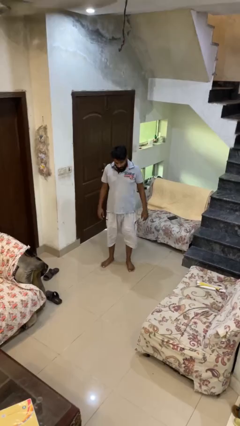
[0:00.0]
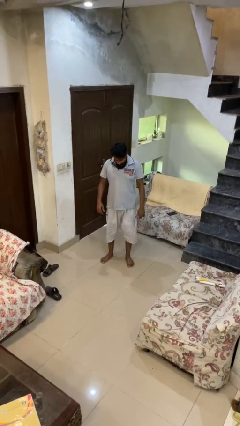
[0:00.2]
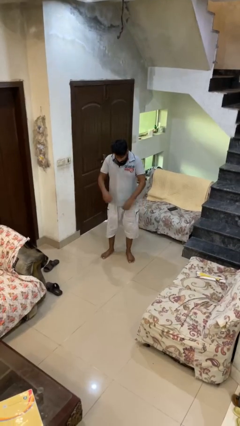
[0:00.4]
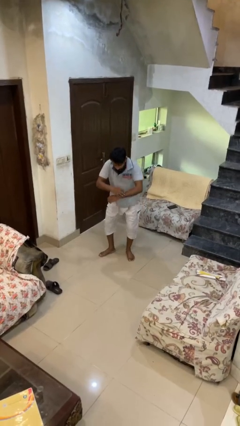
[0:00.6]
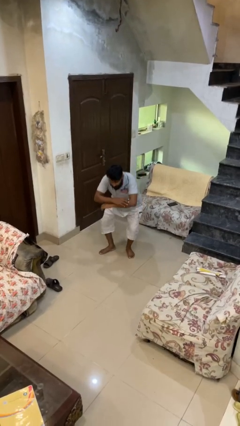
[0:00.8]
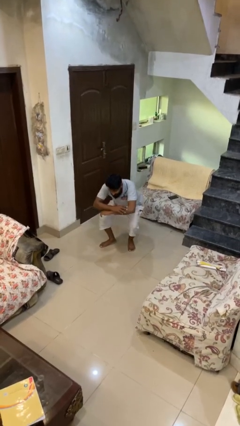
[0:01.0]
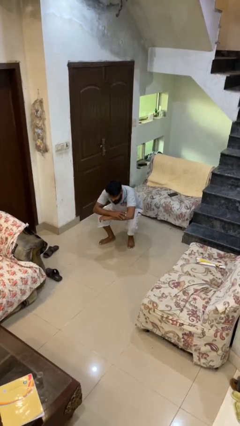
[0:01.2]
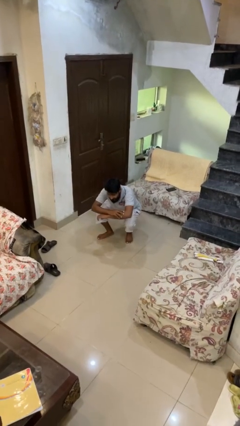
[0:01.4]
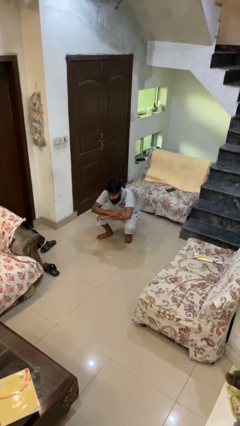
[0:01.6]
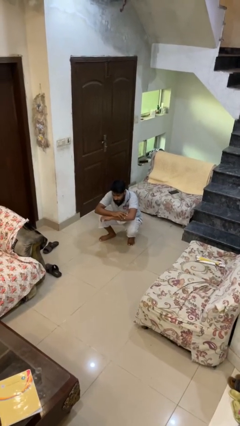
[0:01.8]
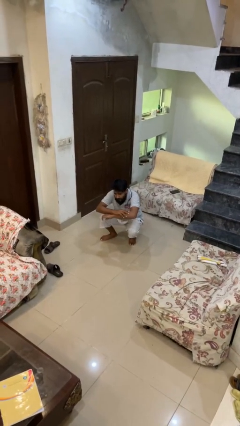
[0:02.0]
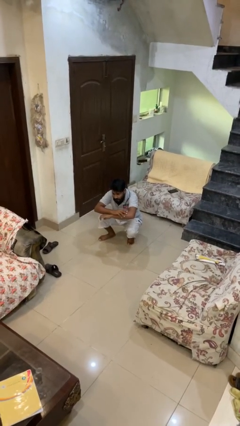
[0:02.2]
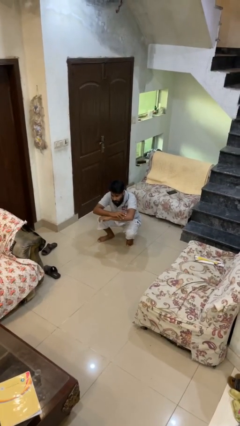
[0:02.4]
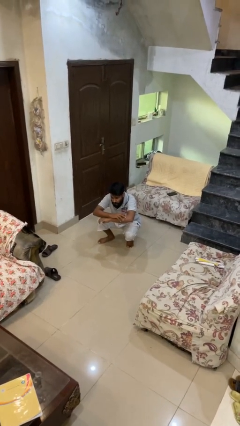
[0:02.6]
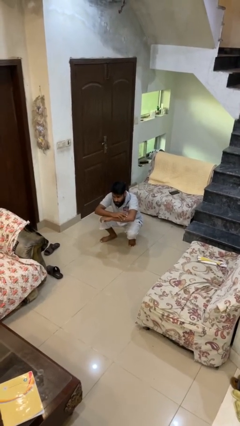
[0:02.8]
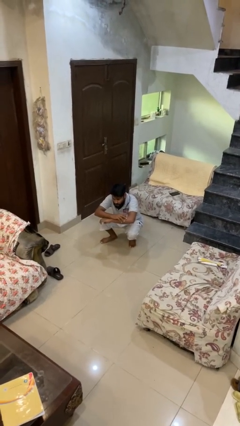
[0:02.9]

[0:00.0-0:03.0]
person squats

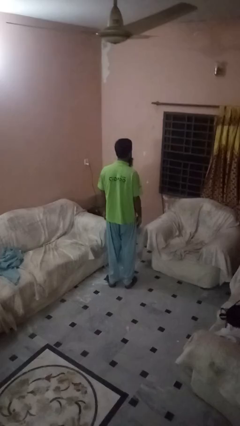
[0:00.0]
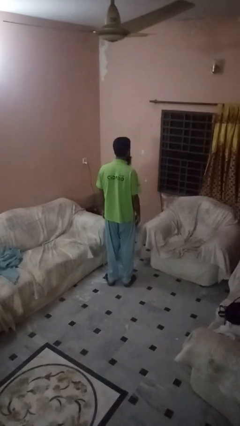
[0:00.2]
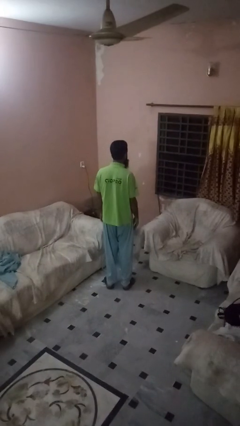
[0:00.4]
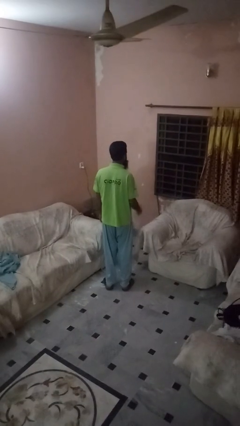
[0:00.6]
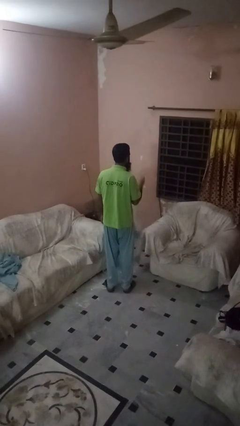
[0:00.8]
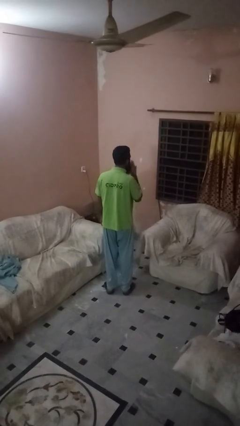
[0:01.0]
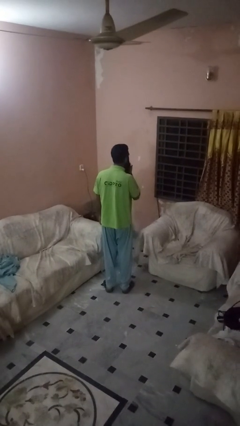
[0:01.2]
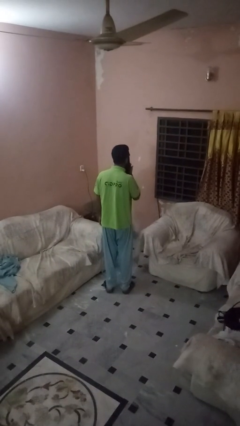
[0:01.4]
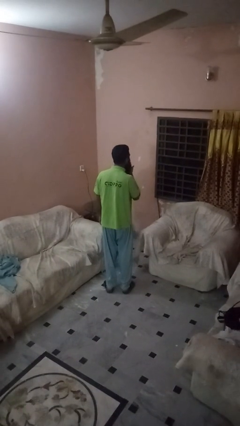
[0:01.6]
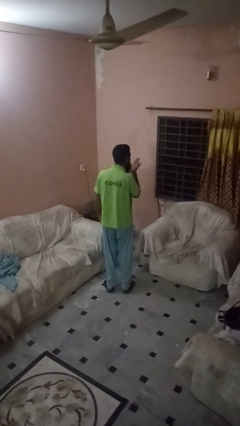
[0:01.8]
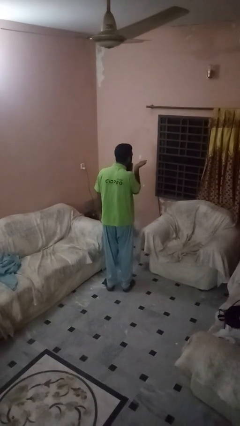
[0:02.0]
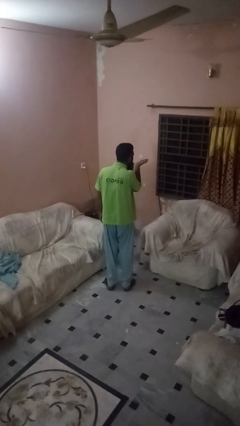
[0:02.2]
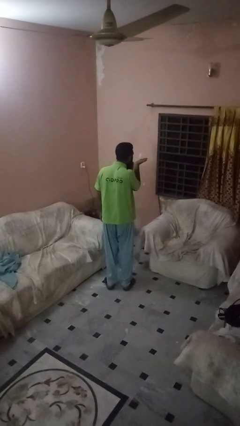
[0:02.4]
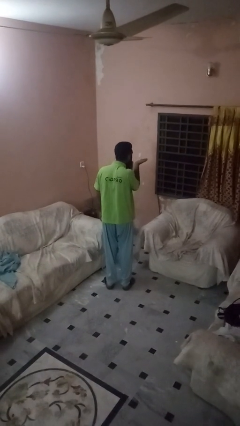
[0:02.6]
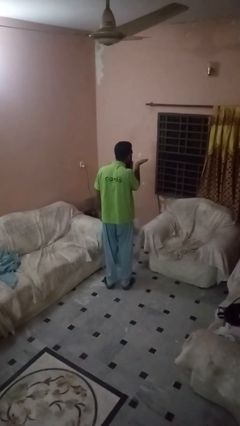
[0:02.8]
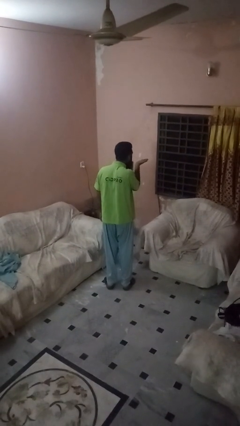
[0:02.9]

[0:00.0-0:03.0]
person gestures blow kiss

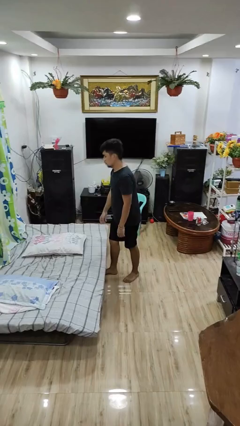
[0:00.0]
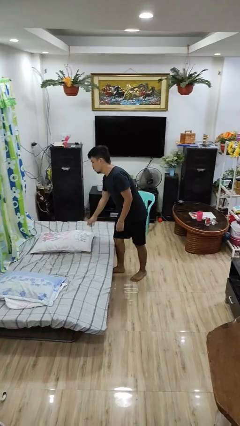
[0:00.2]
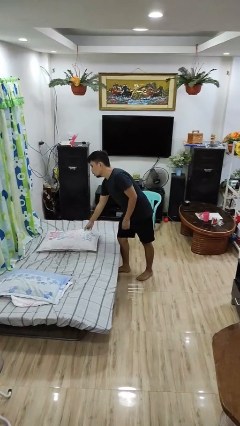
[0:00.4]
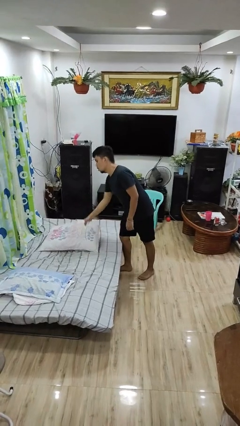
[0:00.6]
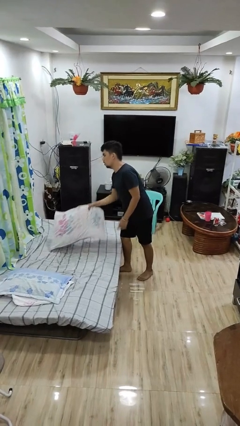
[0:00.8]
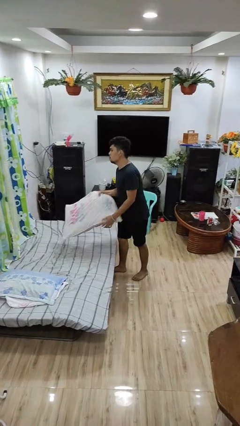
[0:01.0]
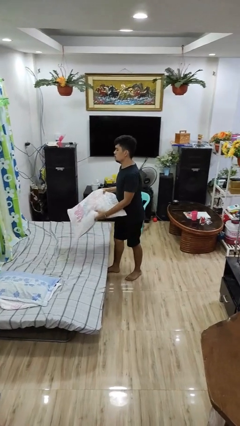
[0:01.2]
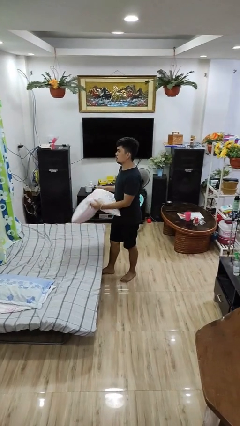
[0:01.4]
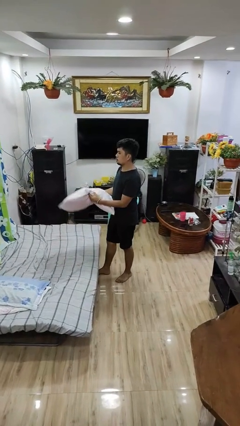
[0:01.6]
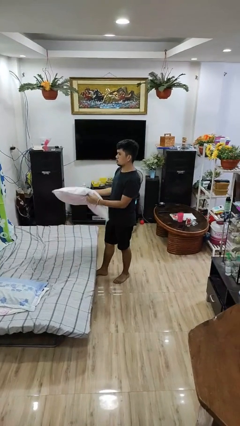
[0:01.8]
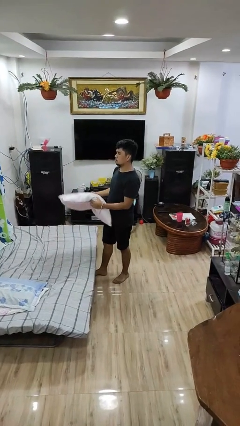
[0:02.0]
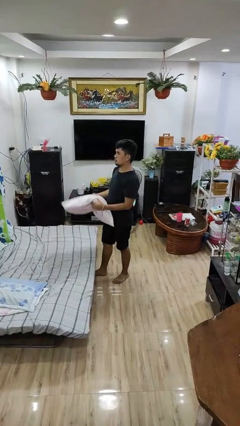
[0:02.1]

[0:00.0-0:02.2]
person picks up object from bed

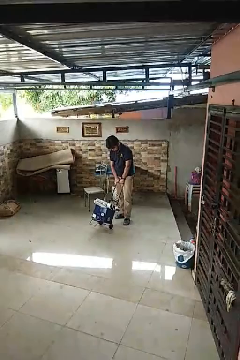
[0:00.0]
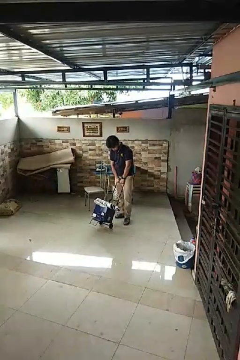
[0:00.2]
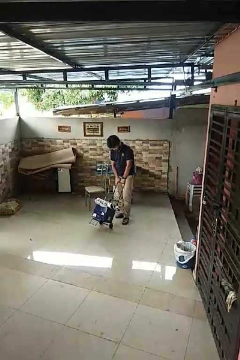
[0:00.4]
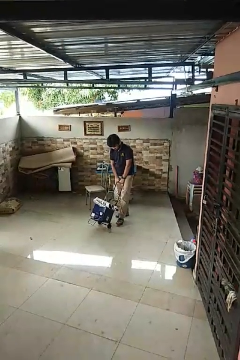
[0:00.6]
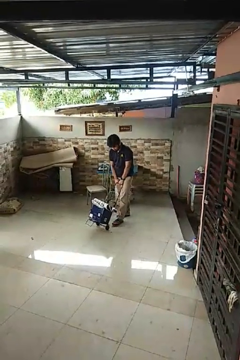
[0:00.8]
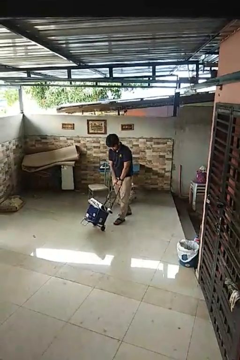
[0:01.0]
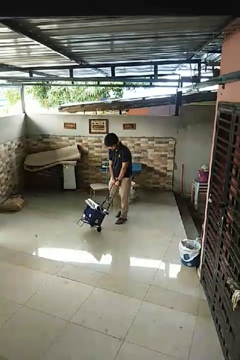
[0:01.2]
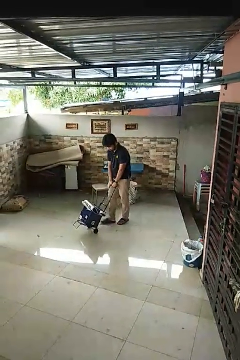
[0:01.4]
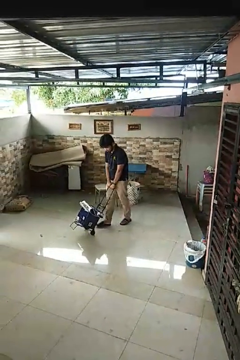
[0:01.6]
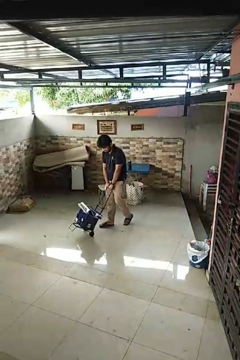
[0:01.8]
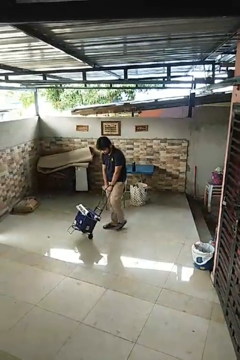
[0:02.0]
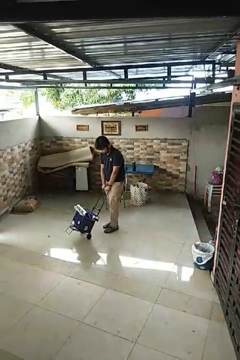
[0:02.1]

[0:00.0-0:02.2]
person pushes wheeled cart

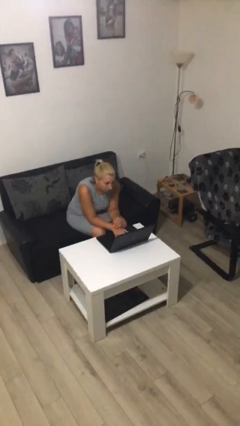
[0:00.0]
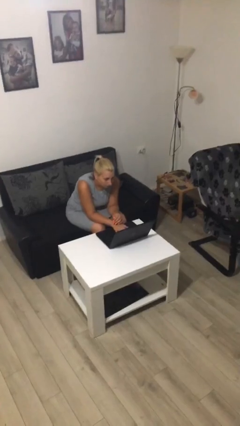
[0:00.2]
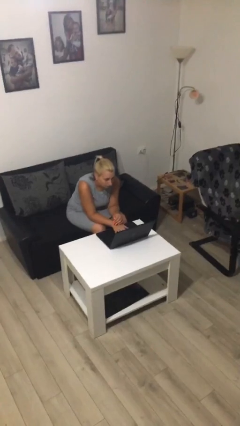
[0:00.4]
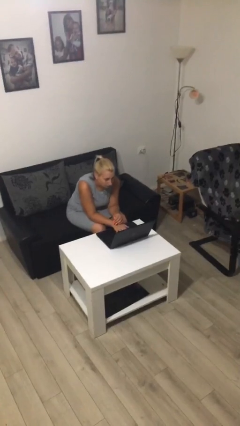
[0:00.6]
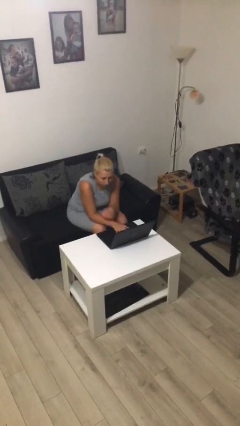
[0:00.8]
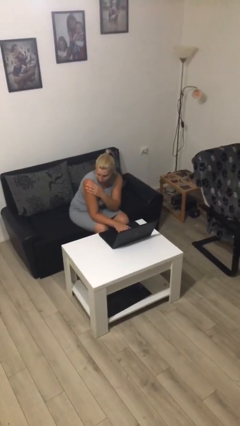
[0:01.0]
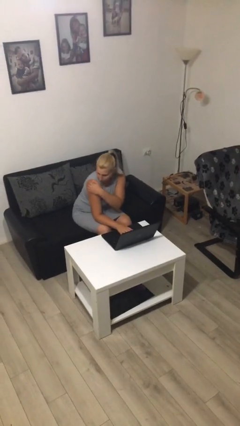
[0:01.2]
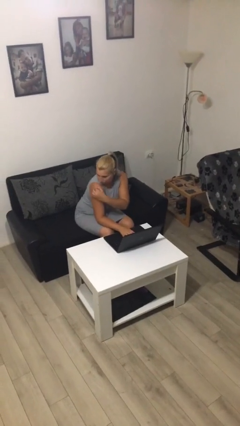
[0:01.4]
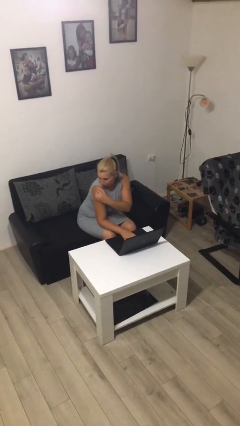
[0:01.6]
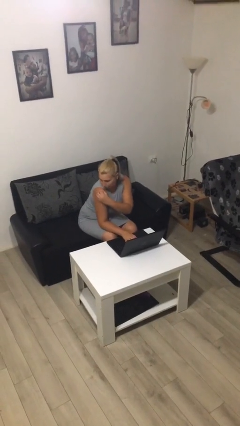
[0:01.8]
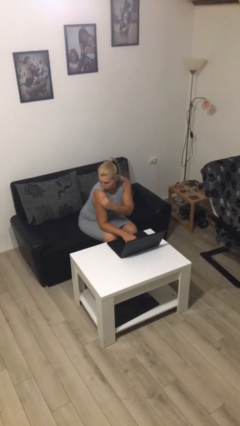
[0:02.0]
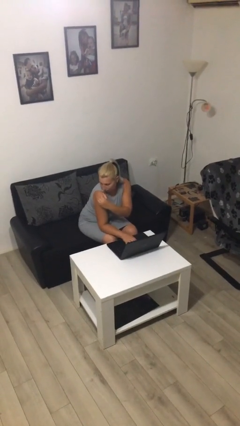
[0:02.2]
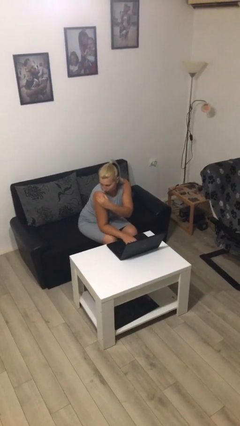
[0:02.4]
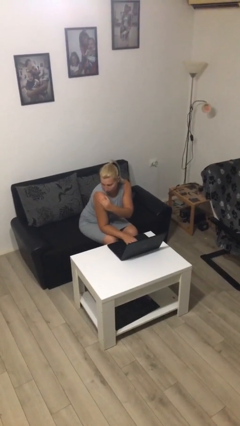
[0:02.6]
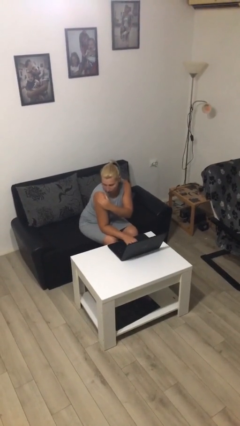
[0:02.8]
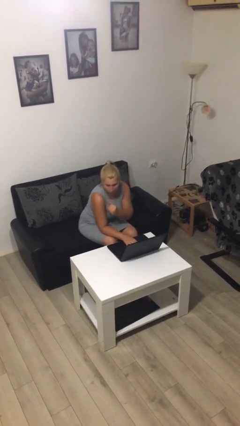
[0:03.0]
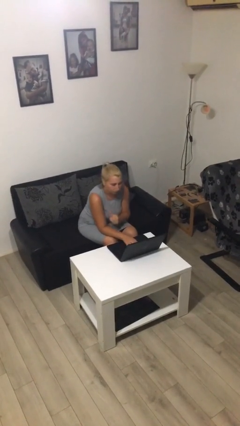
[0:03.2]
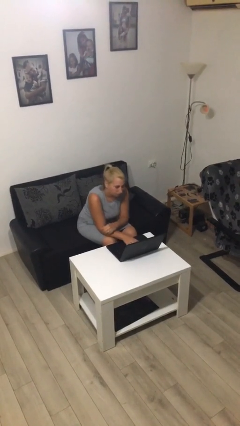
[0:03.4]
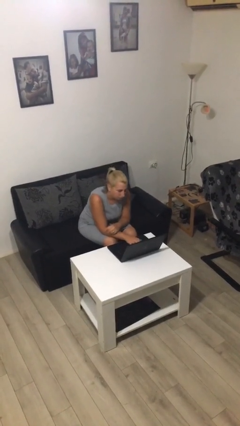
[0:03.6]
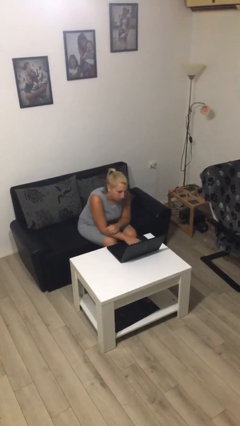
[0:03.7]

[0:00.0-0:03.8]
person interacts with laptop

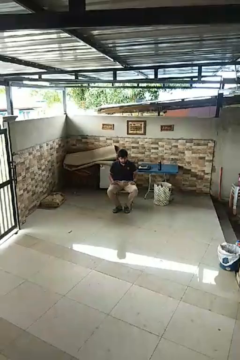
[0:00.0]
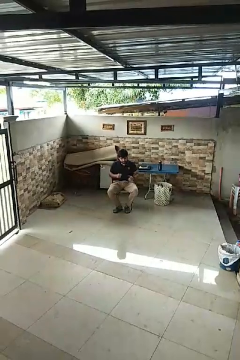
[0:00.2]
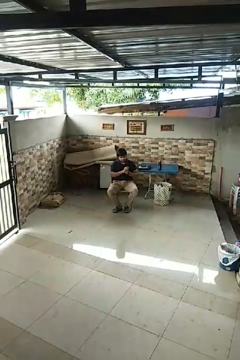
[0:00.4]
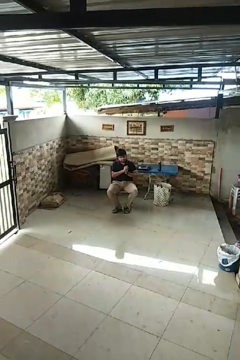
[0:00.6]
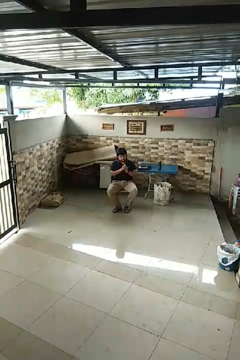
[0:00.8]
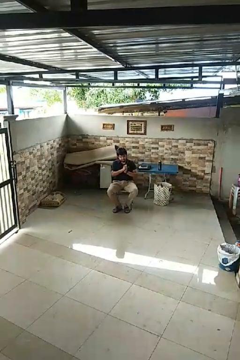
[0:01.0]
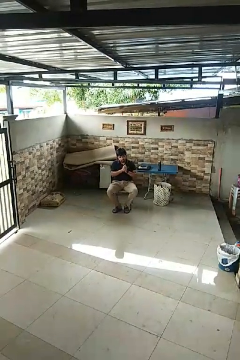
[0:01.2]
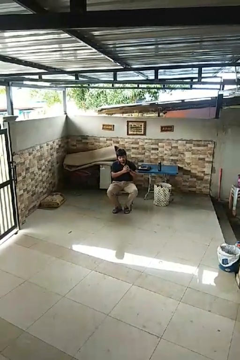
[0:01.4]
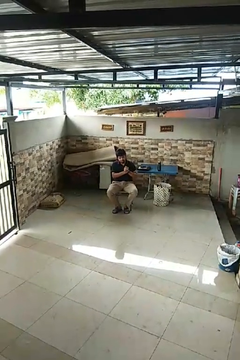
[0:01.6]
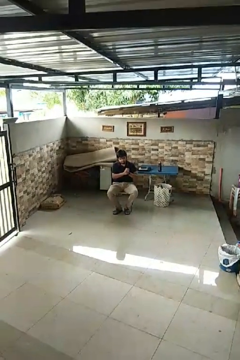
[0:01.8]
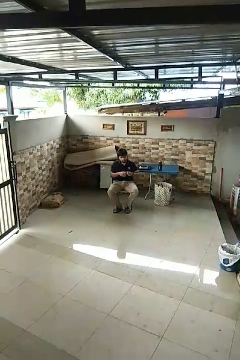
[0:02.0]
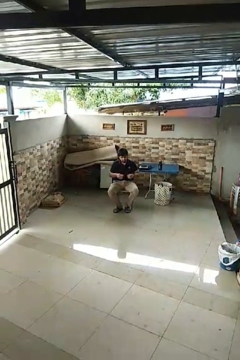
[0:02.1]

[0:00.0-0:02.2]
person cracks knuckles

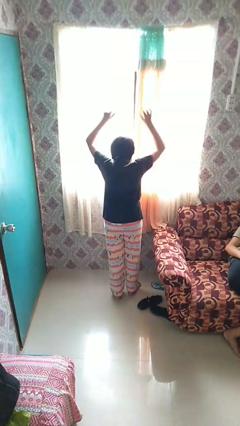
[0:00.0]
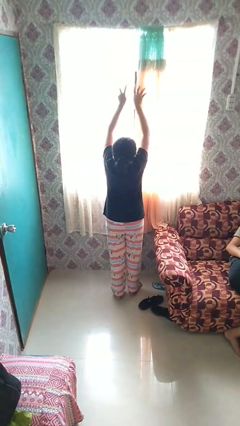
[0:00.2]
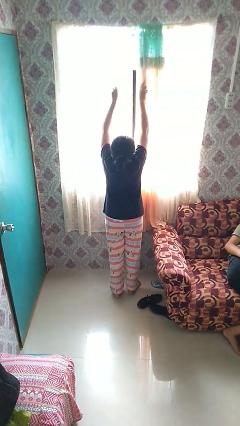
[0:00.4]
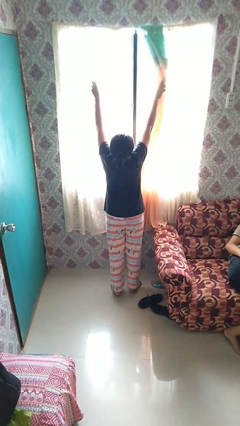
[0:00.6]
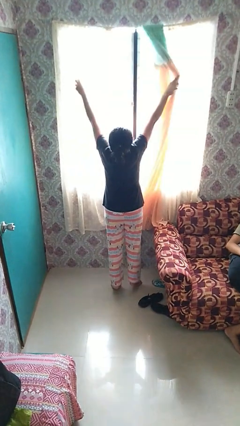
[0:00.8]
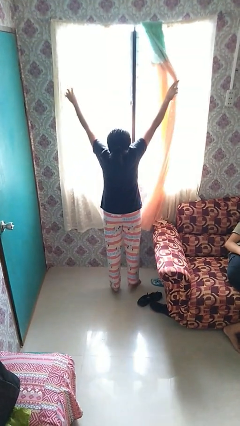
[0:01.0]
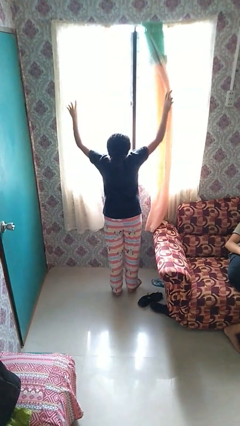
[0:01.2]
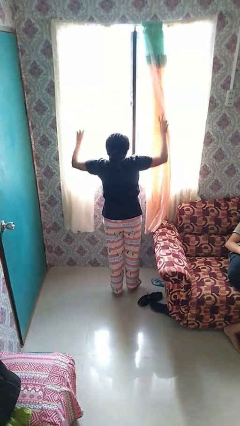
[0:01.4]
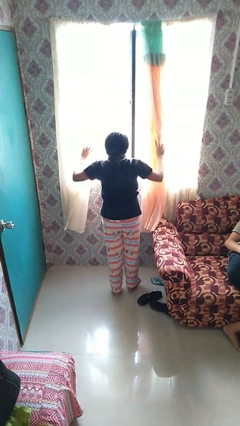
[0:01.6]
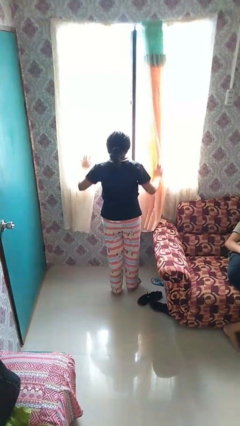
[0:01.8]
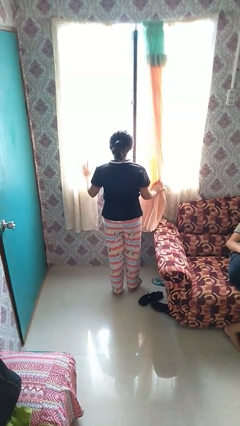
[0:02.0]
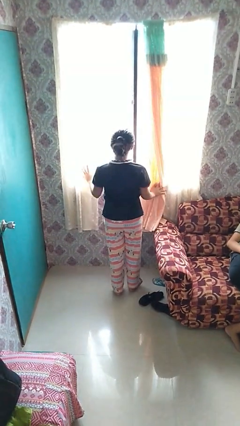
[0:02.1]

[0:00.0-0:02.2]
person opens curtains
